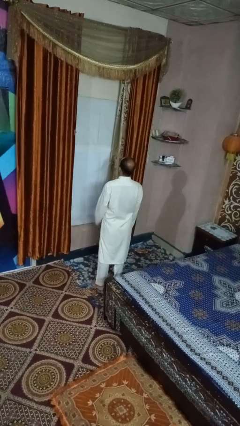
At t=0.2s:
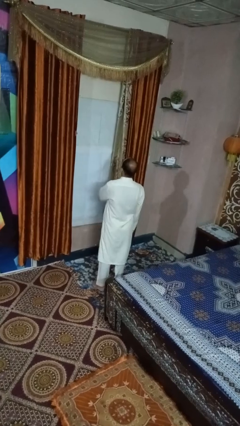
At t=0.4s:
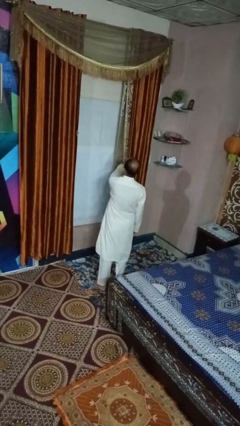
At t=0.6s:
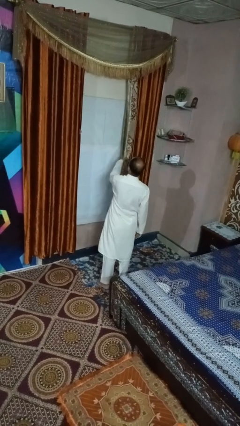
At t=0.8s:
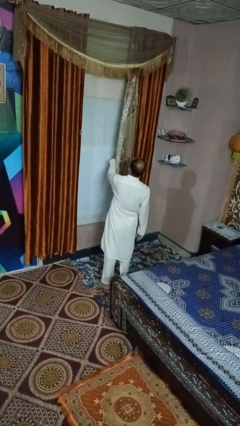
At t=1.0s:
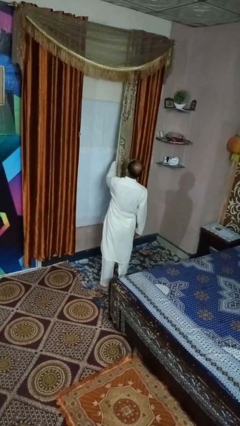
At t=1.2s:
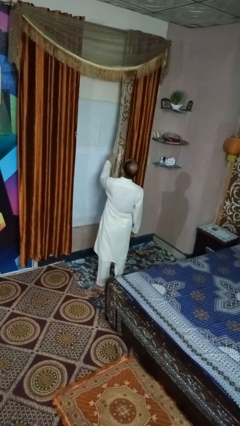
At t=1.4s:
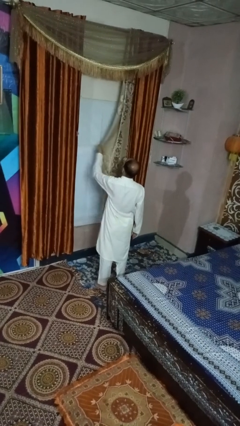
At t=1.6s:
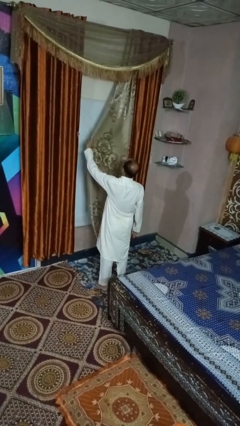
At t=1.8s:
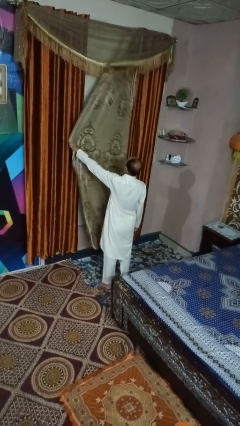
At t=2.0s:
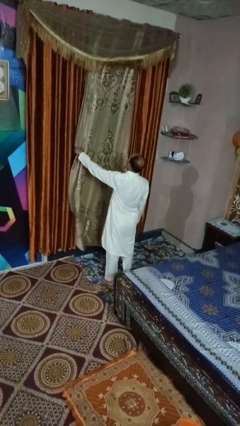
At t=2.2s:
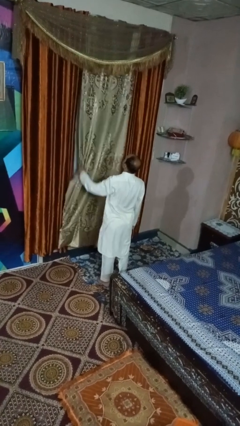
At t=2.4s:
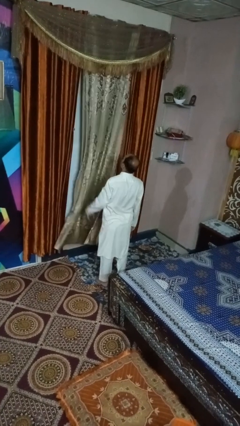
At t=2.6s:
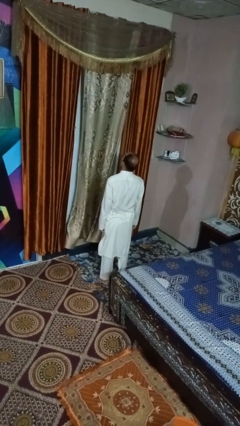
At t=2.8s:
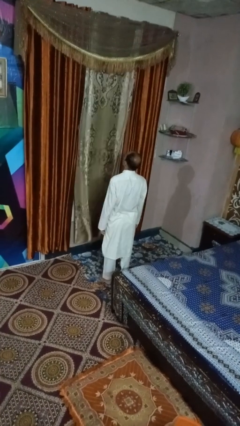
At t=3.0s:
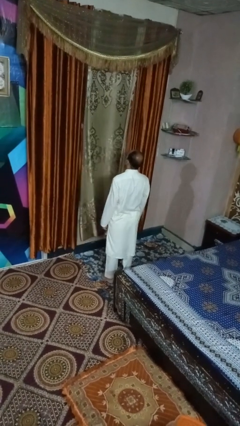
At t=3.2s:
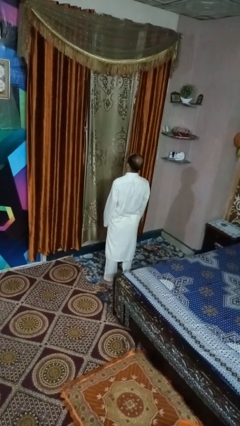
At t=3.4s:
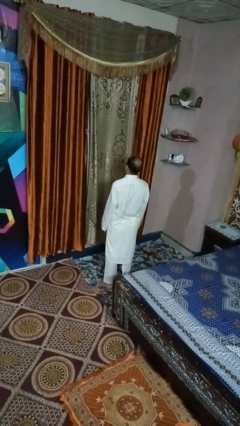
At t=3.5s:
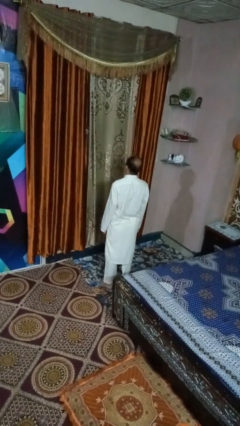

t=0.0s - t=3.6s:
person closes curtains

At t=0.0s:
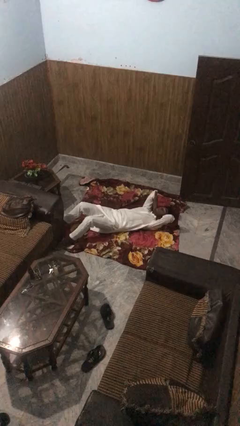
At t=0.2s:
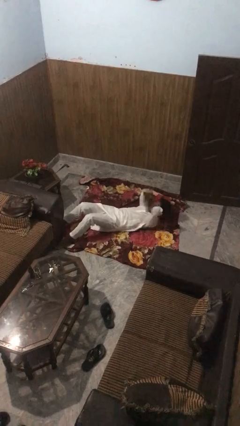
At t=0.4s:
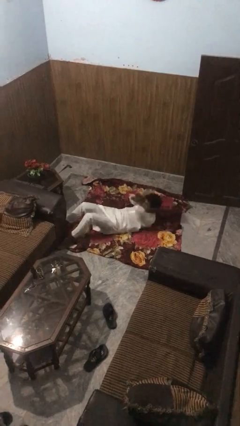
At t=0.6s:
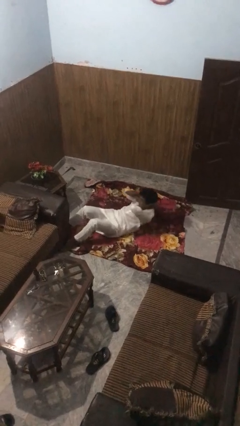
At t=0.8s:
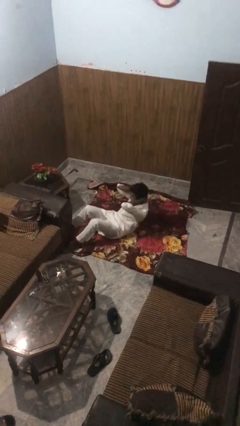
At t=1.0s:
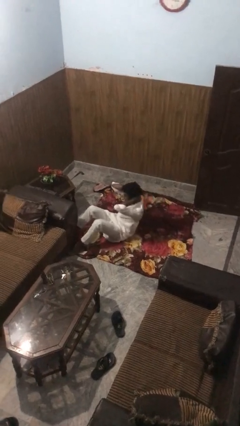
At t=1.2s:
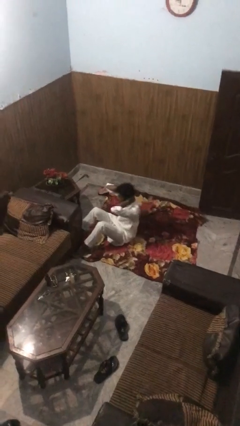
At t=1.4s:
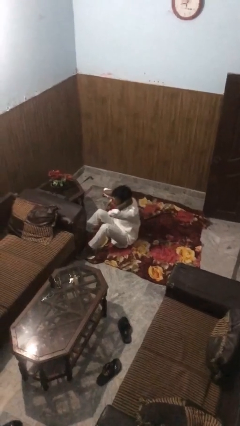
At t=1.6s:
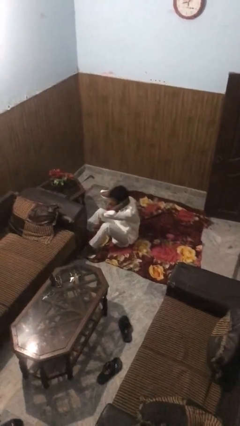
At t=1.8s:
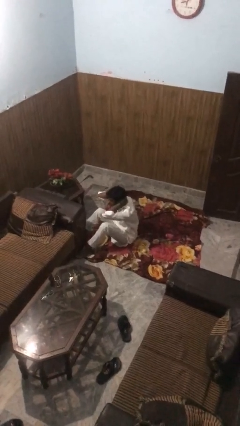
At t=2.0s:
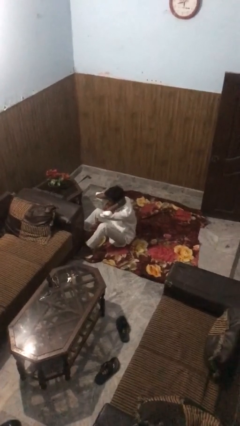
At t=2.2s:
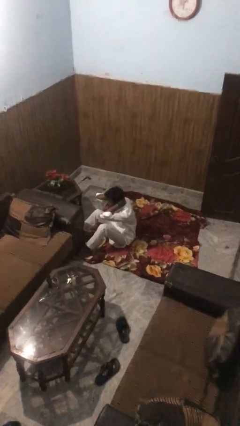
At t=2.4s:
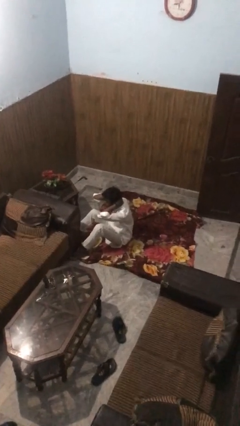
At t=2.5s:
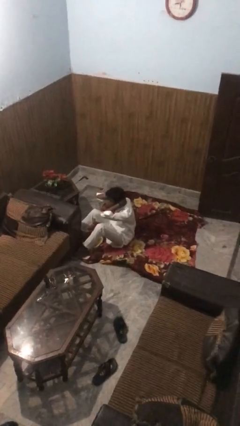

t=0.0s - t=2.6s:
person exercises with situp

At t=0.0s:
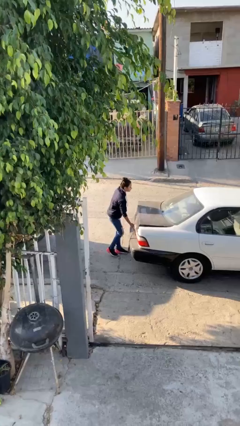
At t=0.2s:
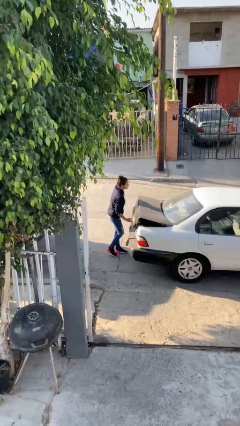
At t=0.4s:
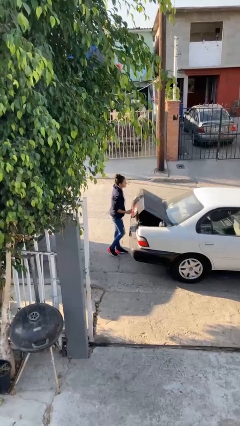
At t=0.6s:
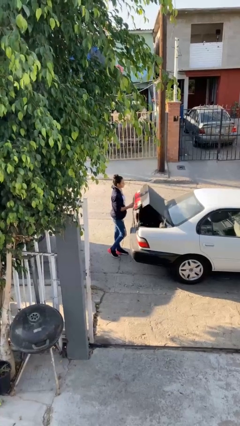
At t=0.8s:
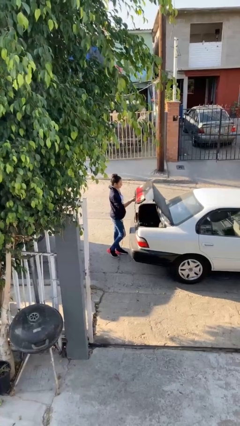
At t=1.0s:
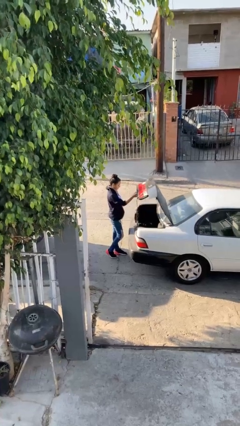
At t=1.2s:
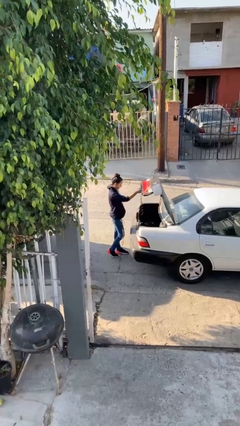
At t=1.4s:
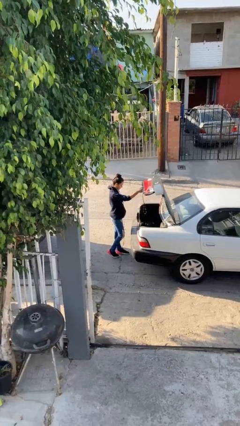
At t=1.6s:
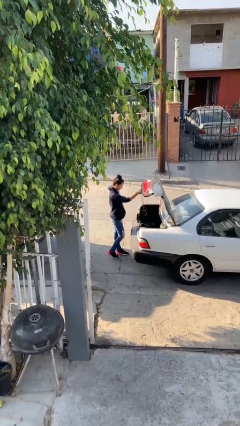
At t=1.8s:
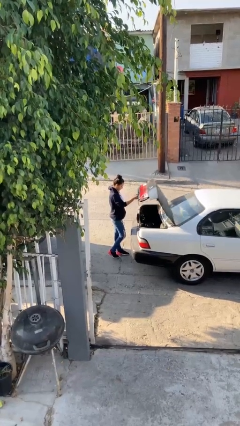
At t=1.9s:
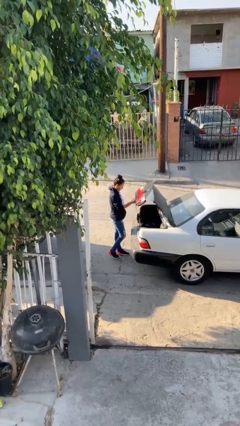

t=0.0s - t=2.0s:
person opens car trunk

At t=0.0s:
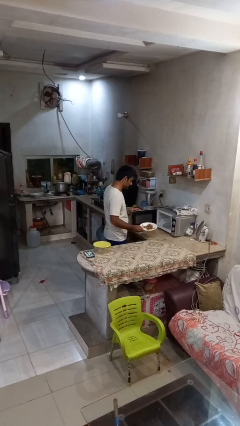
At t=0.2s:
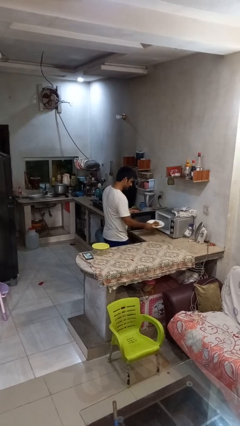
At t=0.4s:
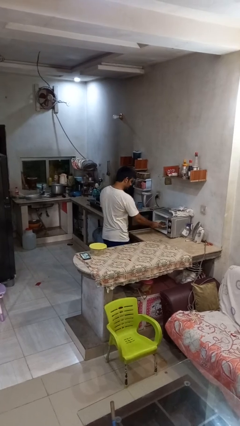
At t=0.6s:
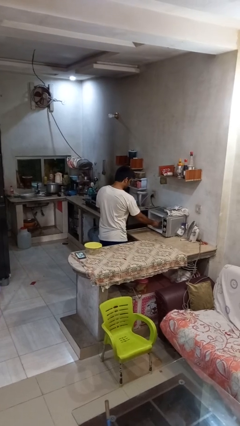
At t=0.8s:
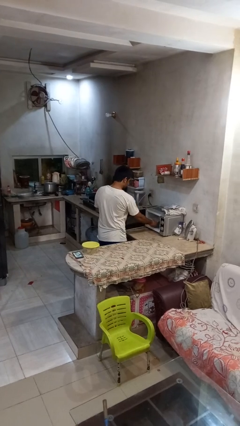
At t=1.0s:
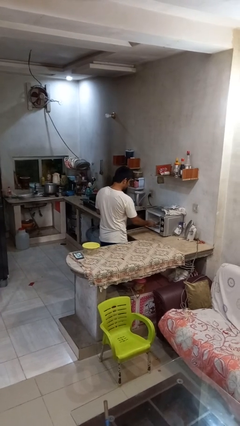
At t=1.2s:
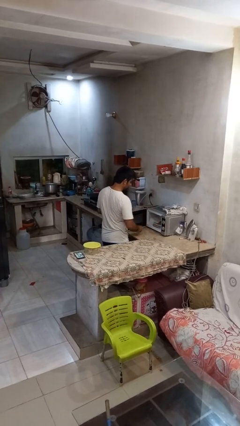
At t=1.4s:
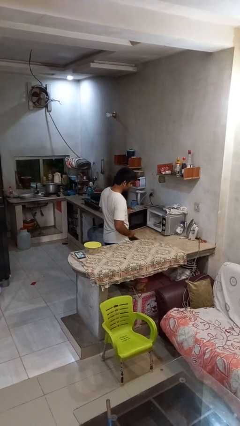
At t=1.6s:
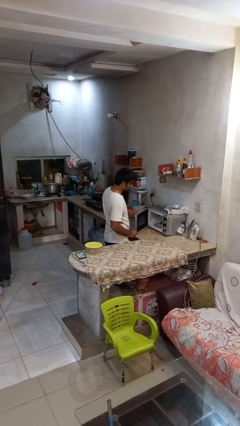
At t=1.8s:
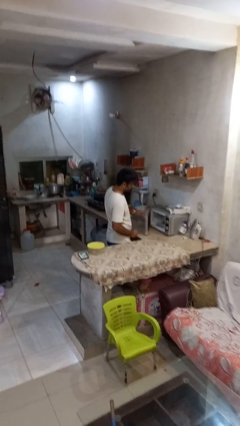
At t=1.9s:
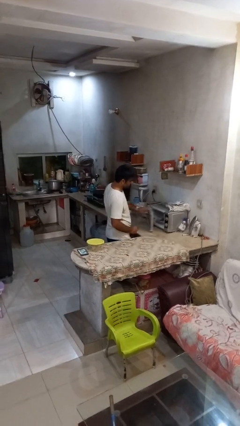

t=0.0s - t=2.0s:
person puts object into microwave

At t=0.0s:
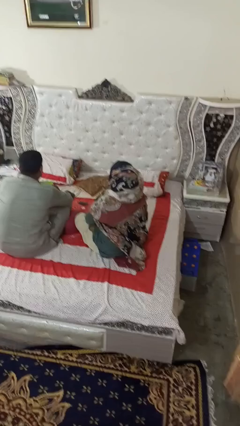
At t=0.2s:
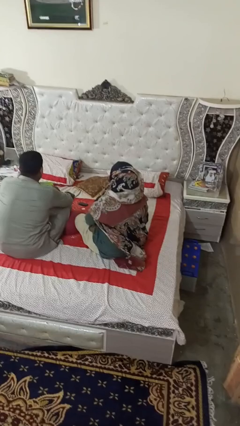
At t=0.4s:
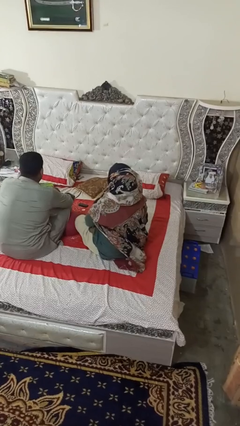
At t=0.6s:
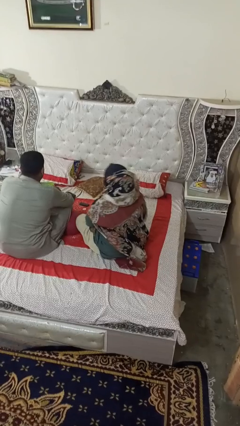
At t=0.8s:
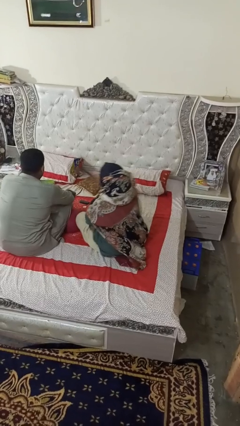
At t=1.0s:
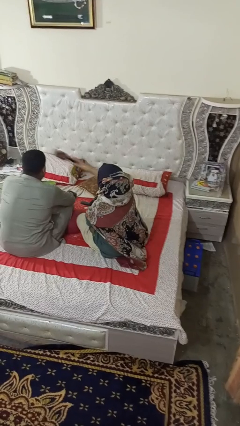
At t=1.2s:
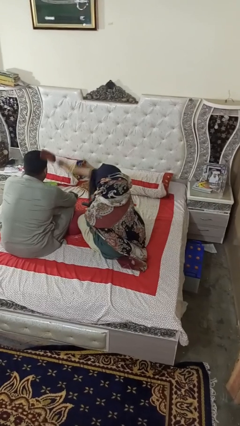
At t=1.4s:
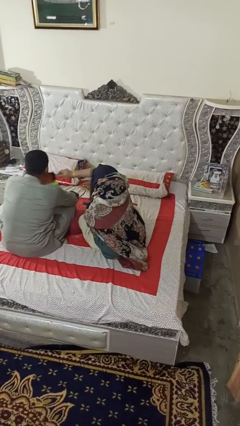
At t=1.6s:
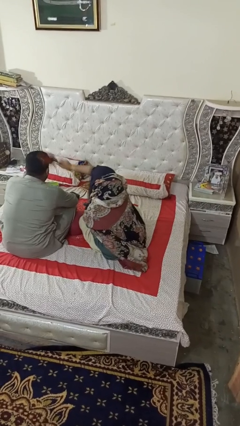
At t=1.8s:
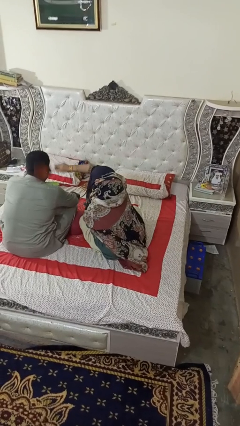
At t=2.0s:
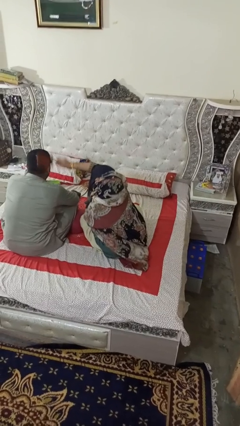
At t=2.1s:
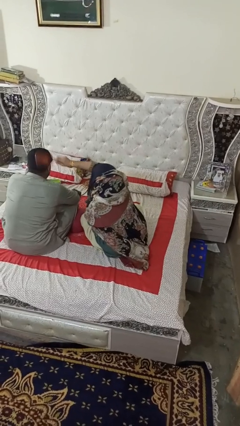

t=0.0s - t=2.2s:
person brushes hair of person

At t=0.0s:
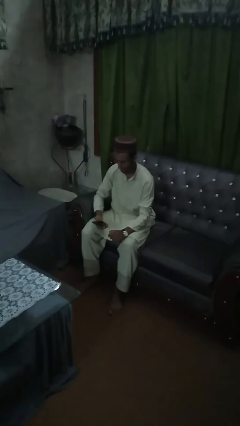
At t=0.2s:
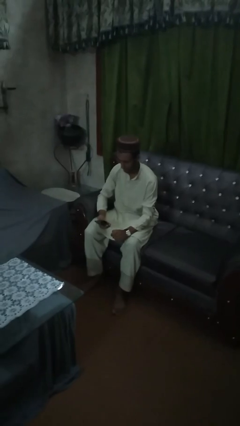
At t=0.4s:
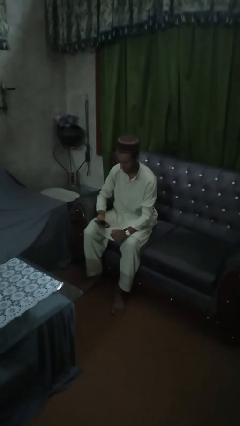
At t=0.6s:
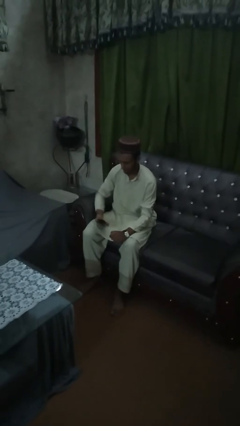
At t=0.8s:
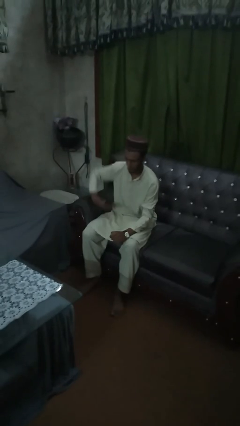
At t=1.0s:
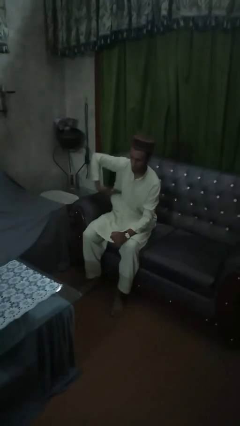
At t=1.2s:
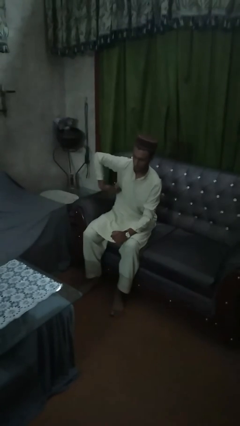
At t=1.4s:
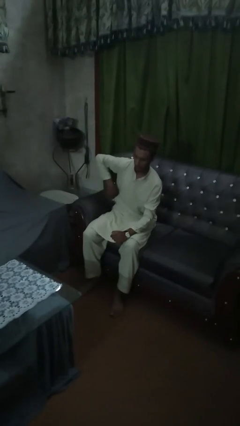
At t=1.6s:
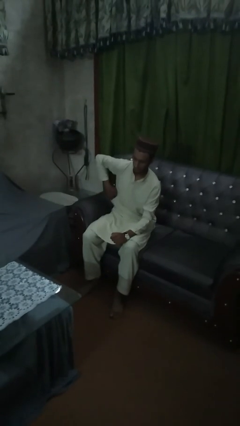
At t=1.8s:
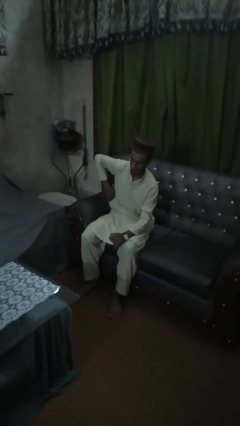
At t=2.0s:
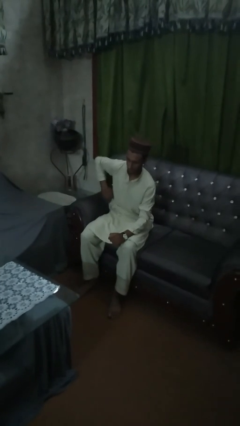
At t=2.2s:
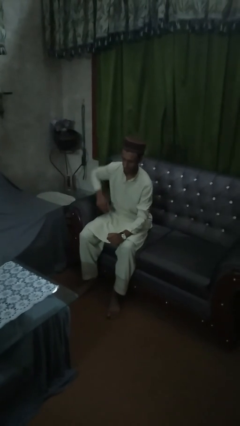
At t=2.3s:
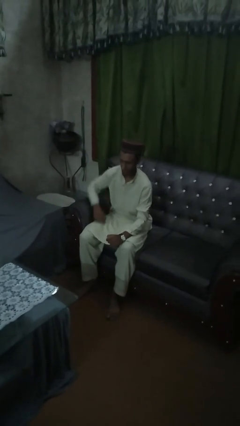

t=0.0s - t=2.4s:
person puts phone into pocket

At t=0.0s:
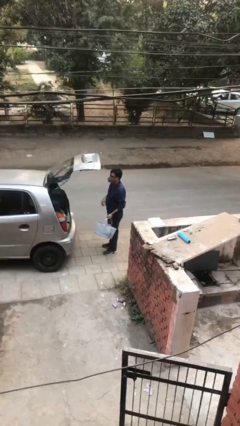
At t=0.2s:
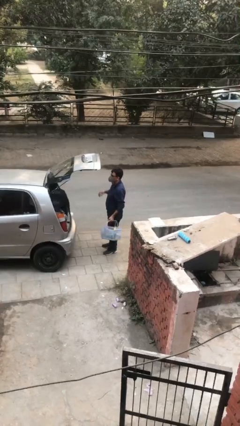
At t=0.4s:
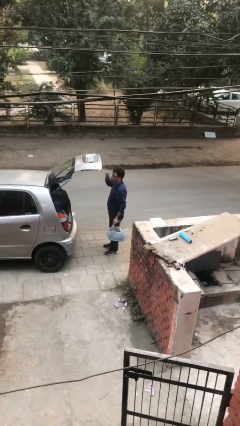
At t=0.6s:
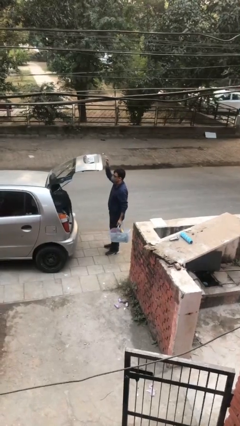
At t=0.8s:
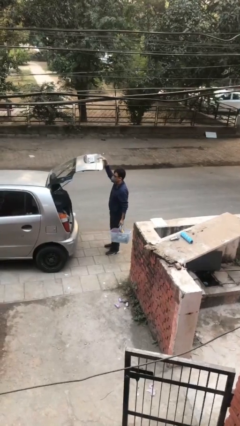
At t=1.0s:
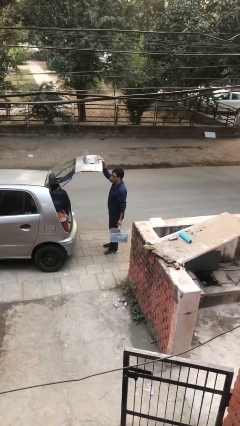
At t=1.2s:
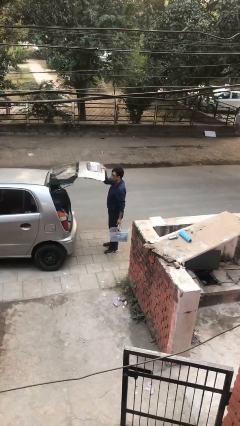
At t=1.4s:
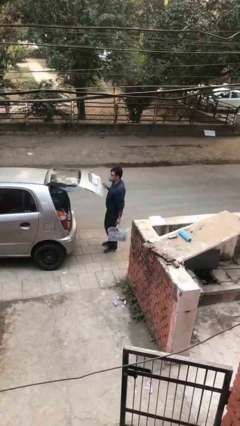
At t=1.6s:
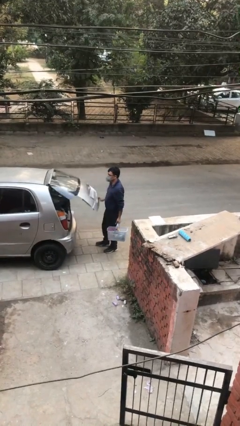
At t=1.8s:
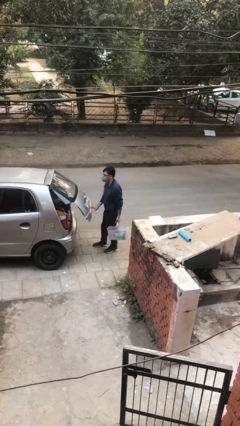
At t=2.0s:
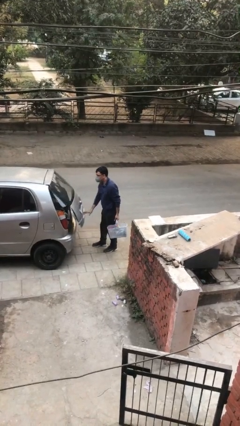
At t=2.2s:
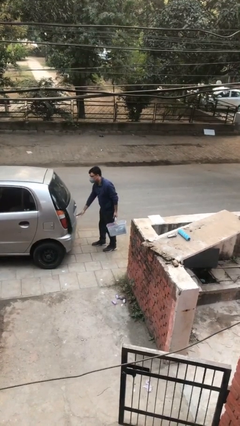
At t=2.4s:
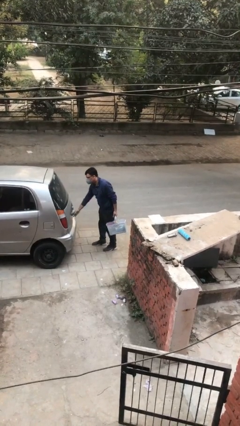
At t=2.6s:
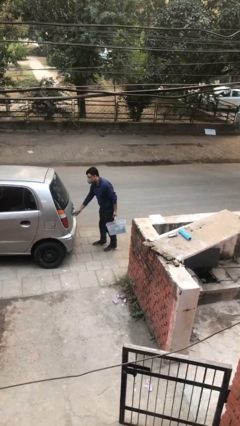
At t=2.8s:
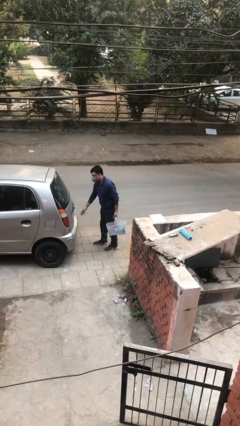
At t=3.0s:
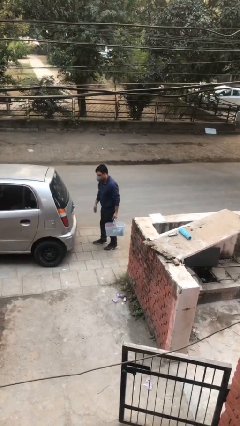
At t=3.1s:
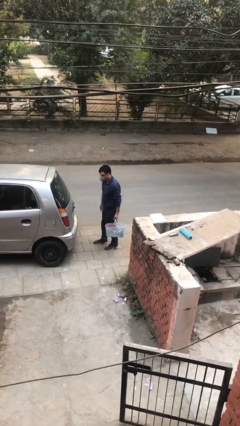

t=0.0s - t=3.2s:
person closes car trunk
